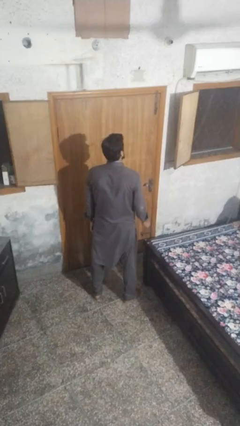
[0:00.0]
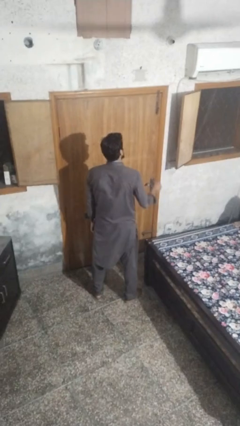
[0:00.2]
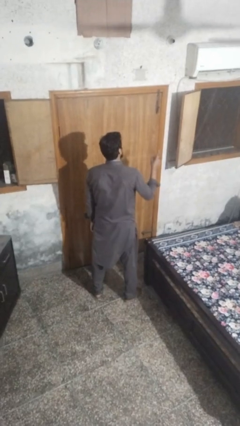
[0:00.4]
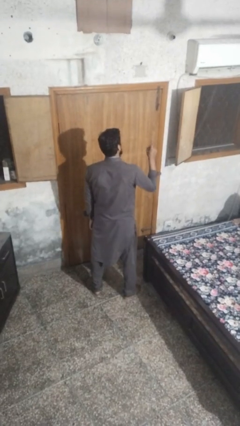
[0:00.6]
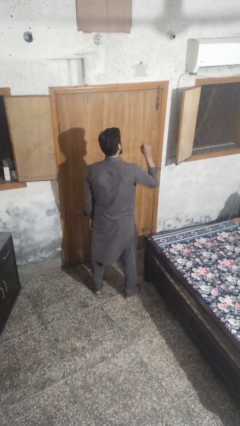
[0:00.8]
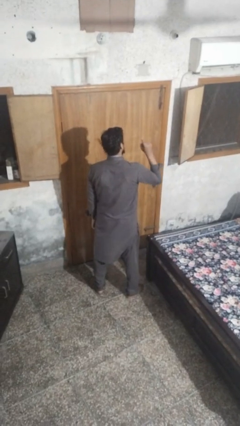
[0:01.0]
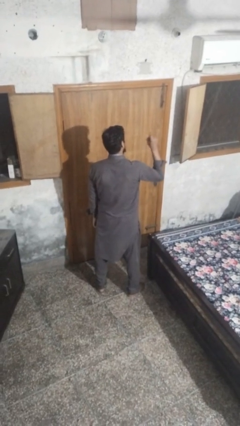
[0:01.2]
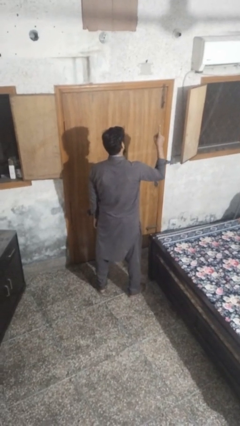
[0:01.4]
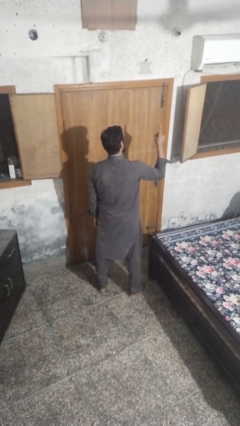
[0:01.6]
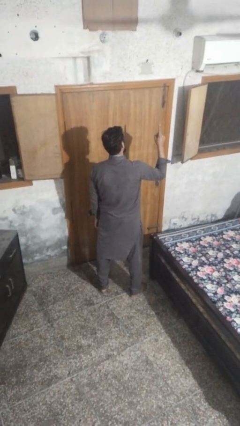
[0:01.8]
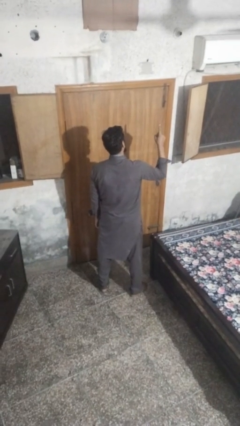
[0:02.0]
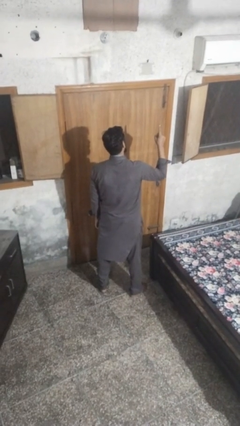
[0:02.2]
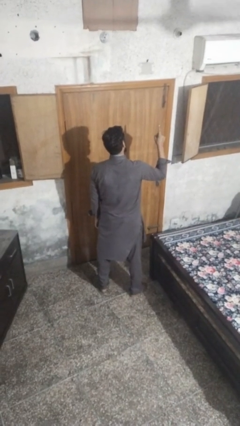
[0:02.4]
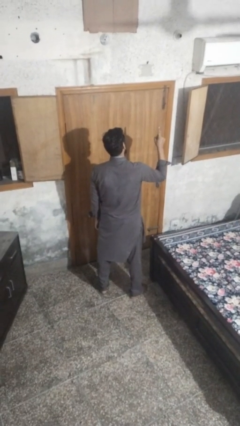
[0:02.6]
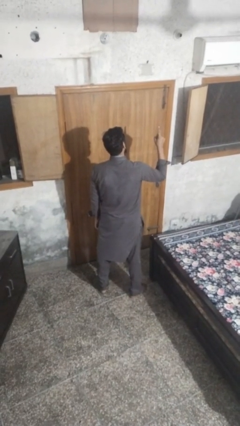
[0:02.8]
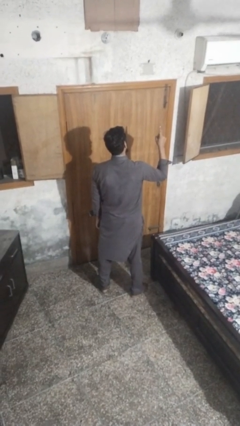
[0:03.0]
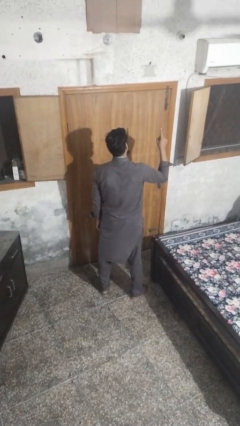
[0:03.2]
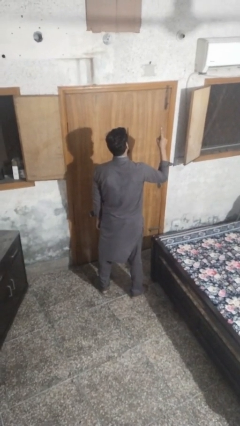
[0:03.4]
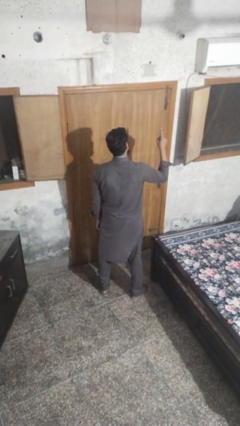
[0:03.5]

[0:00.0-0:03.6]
person gestures number one

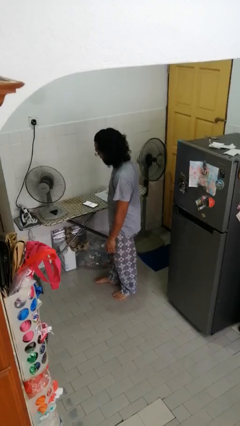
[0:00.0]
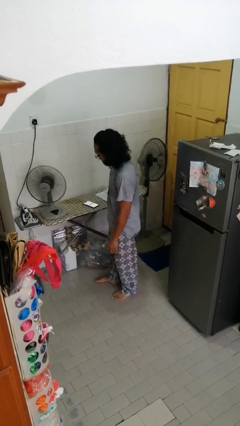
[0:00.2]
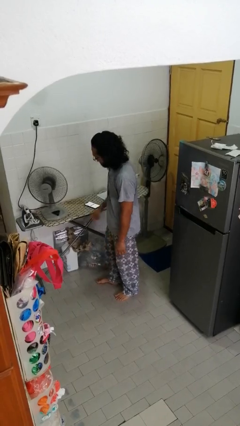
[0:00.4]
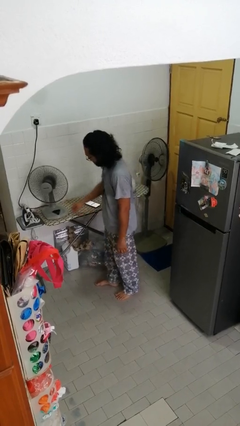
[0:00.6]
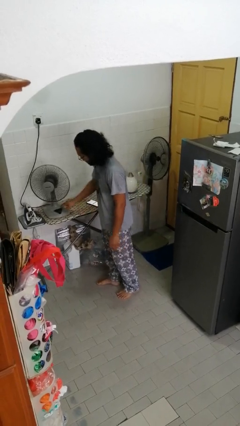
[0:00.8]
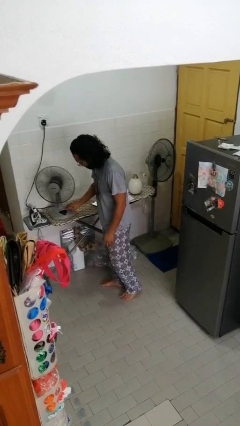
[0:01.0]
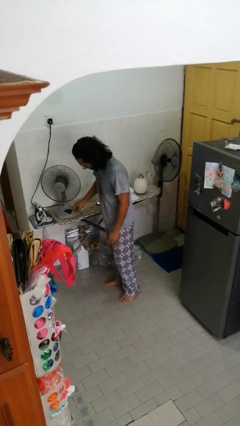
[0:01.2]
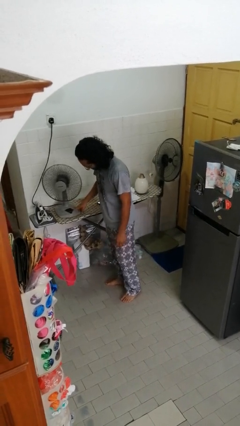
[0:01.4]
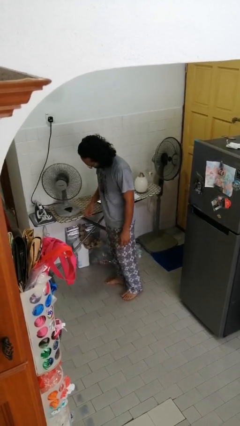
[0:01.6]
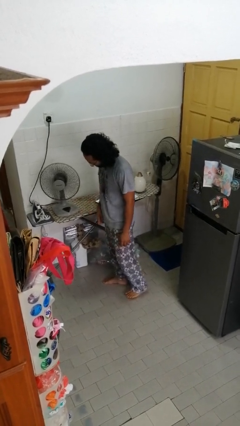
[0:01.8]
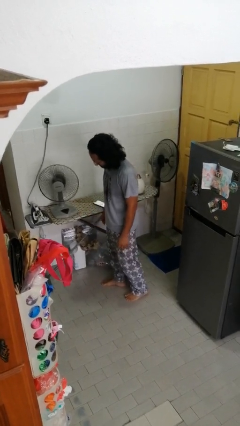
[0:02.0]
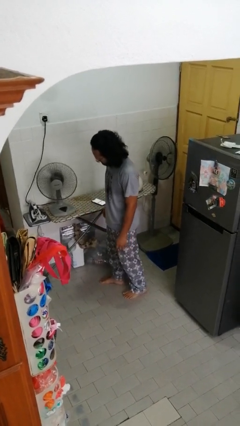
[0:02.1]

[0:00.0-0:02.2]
person turns on fan

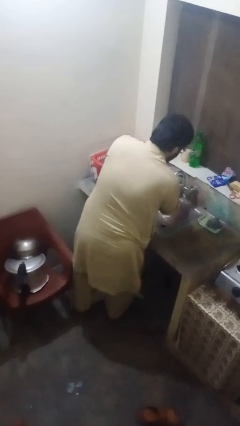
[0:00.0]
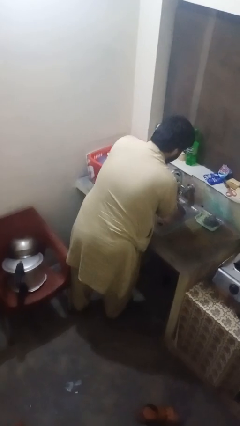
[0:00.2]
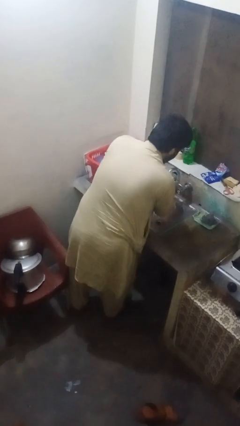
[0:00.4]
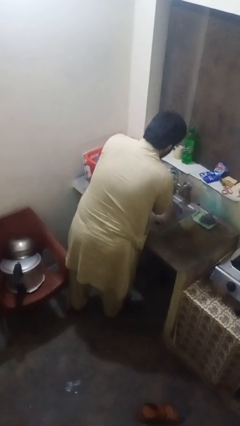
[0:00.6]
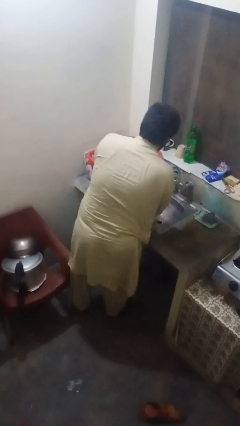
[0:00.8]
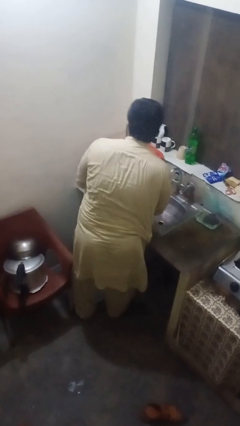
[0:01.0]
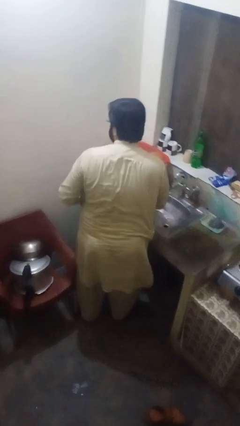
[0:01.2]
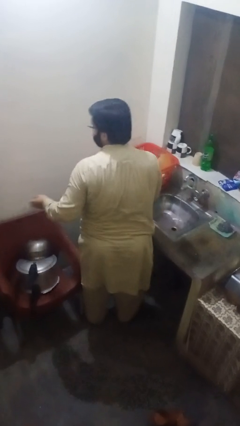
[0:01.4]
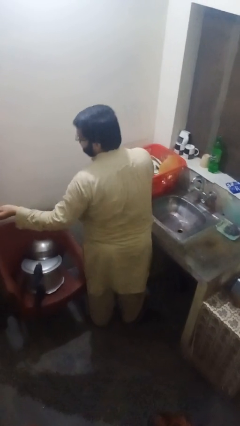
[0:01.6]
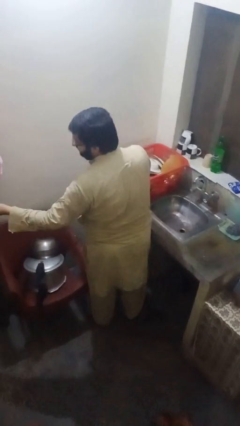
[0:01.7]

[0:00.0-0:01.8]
person washes hands

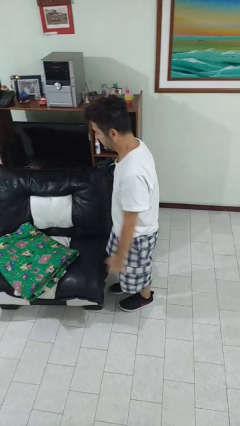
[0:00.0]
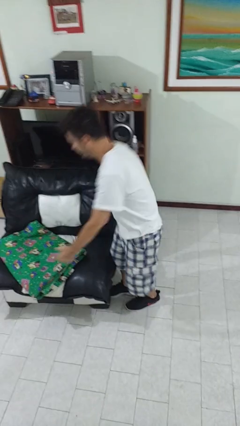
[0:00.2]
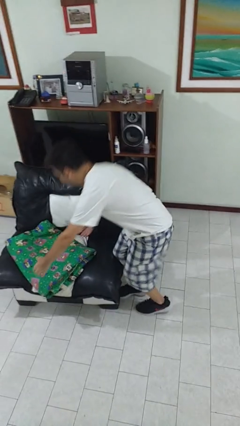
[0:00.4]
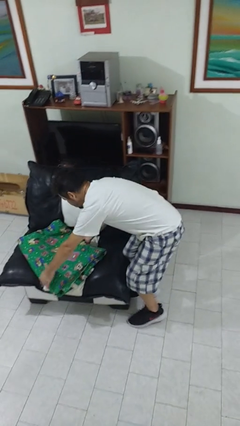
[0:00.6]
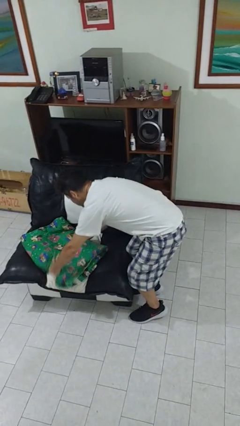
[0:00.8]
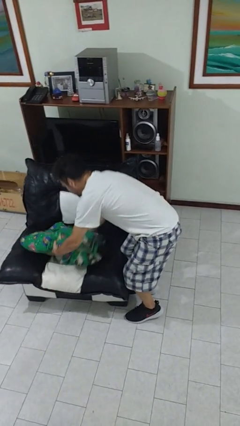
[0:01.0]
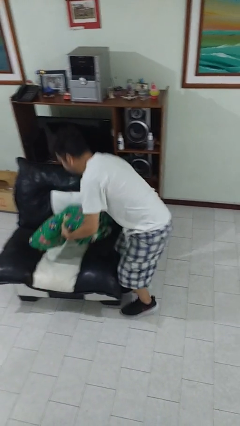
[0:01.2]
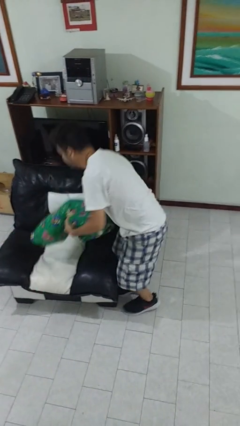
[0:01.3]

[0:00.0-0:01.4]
person picks up object from couch

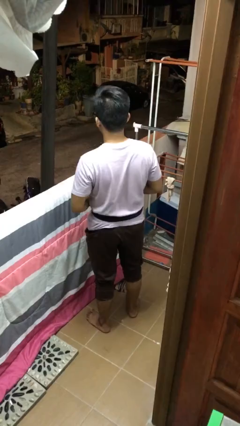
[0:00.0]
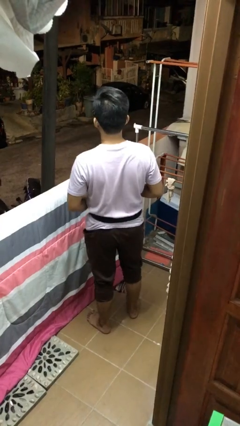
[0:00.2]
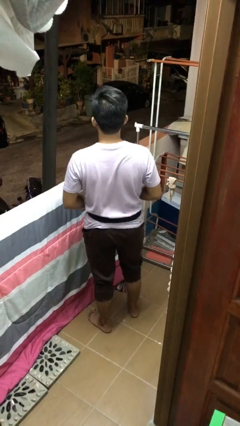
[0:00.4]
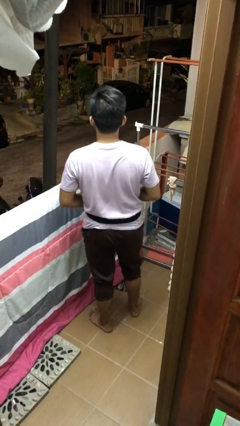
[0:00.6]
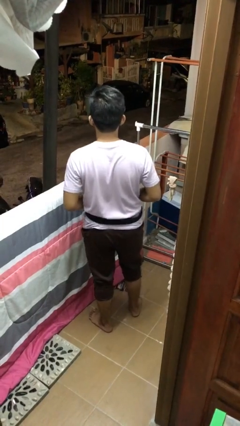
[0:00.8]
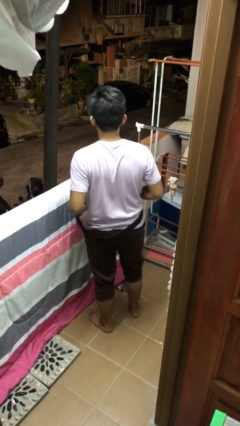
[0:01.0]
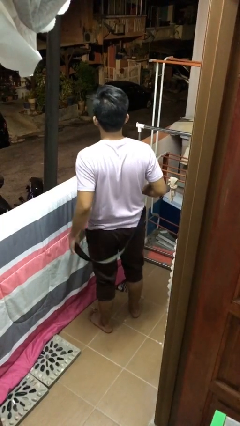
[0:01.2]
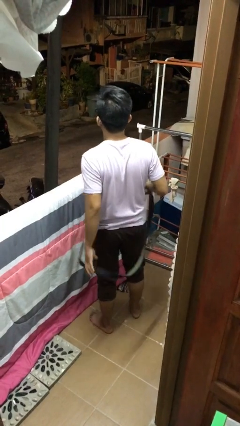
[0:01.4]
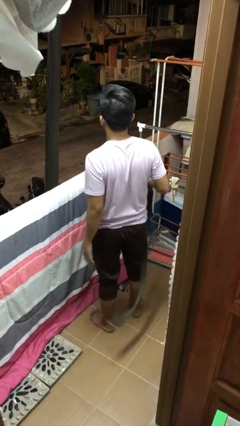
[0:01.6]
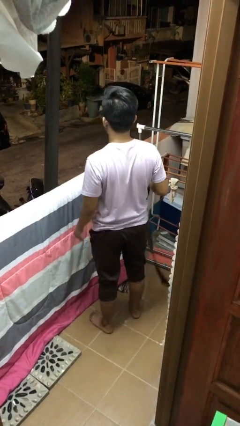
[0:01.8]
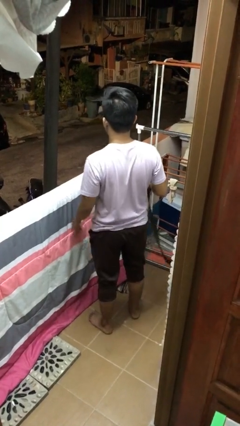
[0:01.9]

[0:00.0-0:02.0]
person takes off belt

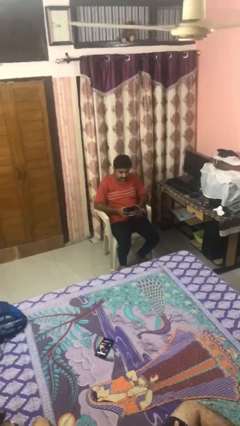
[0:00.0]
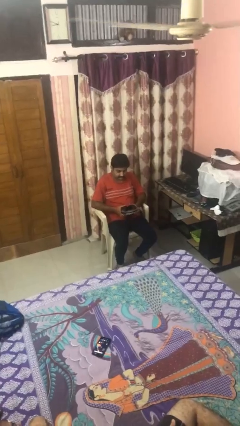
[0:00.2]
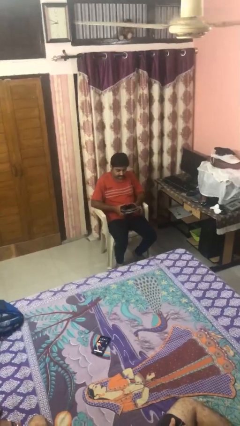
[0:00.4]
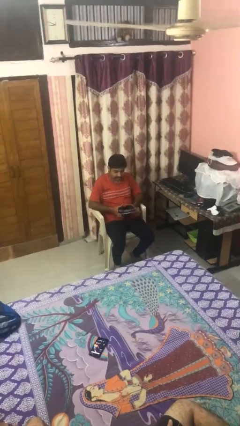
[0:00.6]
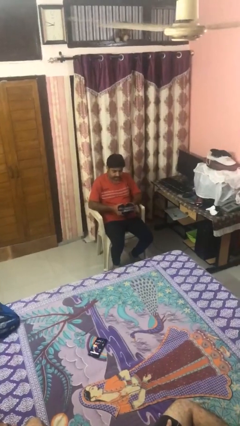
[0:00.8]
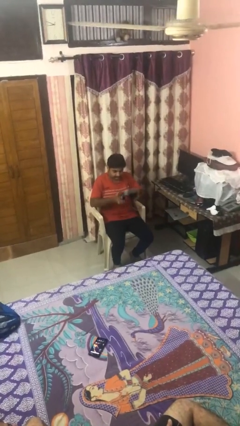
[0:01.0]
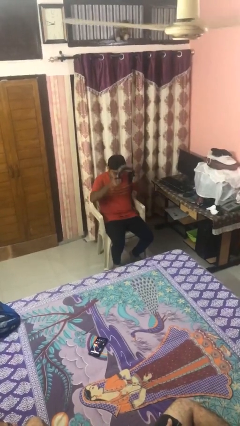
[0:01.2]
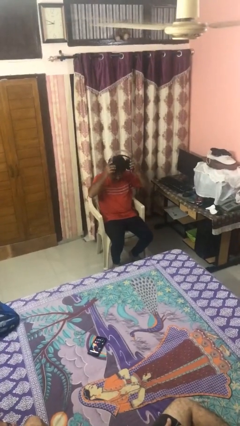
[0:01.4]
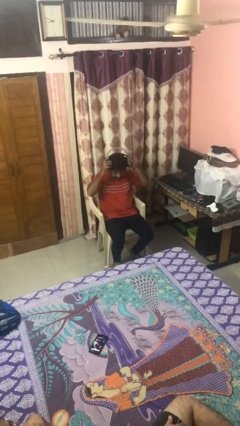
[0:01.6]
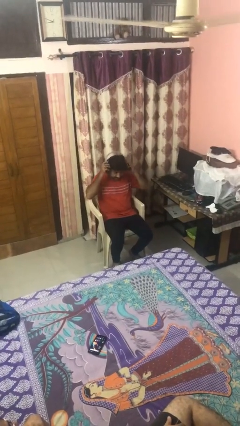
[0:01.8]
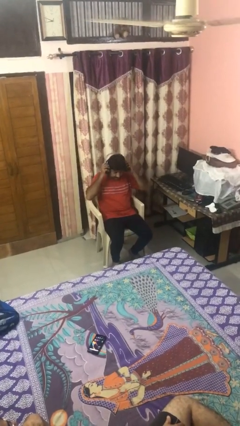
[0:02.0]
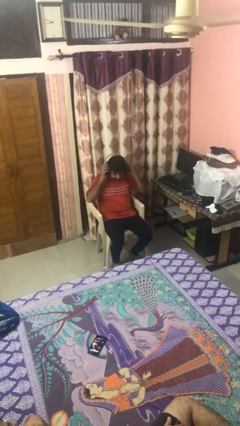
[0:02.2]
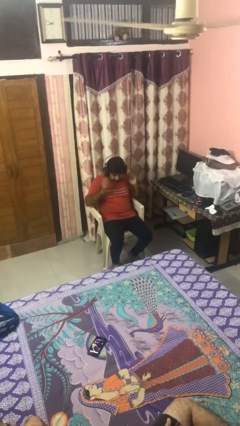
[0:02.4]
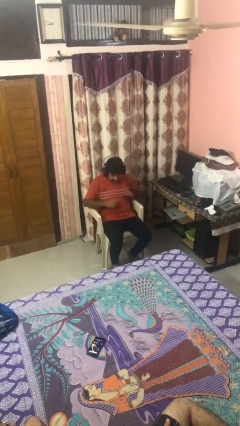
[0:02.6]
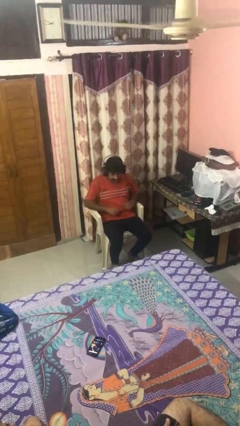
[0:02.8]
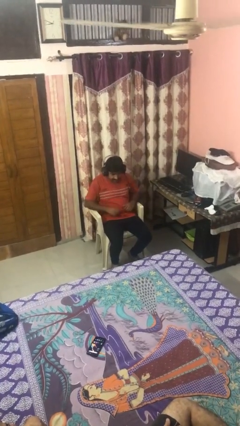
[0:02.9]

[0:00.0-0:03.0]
person puts on headphones

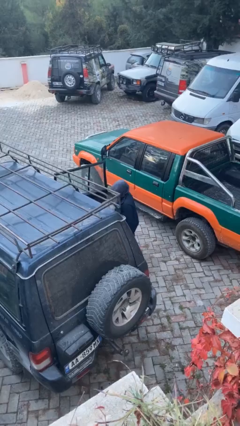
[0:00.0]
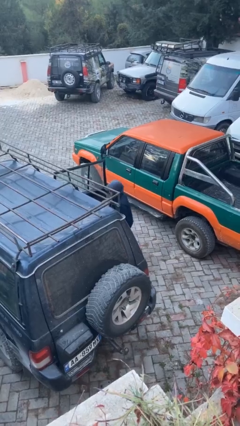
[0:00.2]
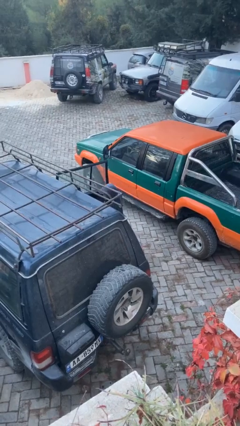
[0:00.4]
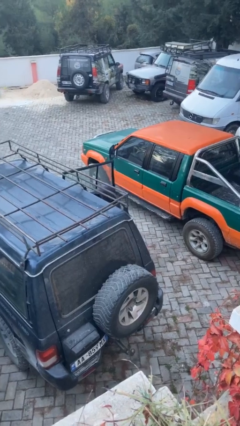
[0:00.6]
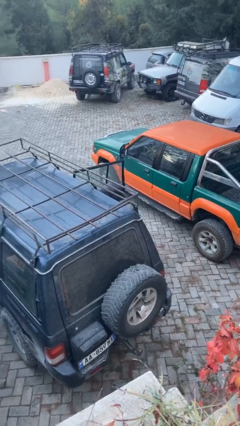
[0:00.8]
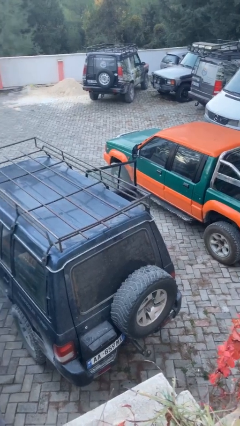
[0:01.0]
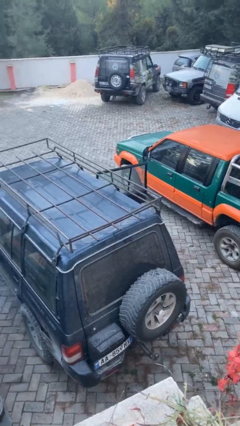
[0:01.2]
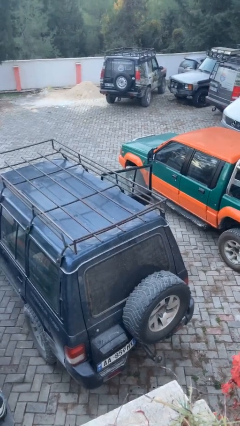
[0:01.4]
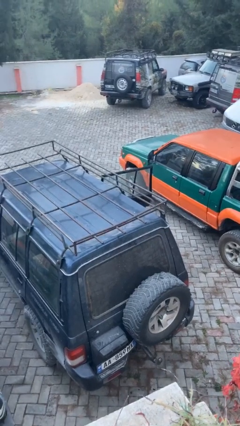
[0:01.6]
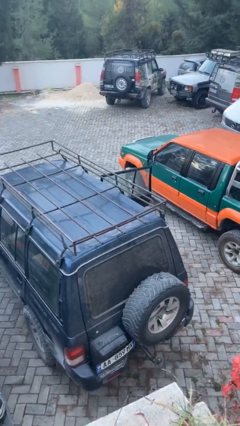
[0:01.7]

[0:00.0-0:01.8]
person enters car

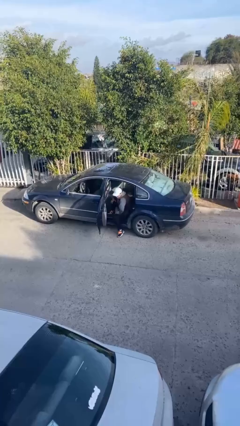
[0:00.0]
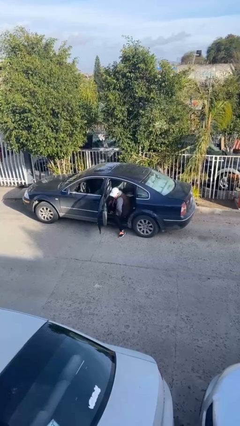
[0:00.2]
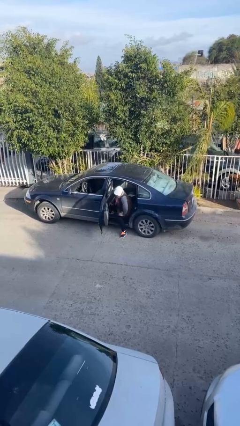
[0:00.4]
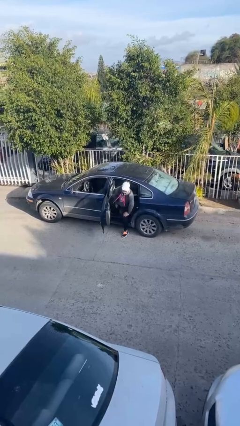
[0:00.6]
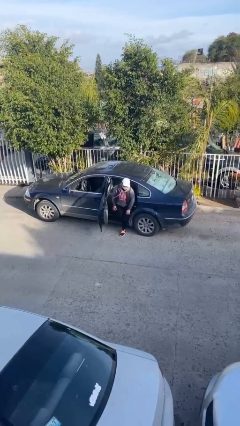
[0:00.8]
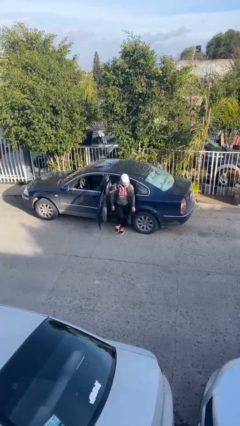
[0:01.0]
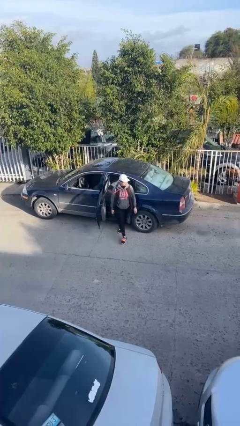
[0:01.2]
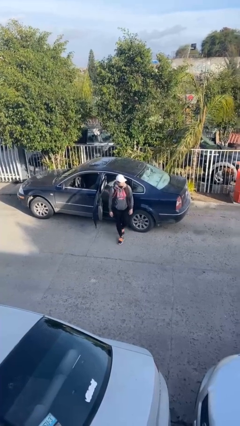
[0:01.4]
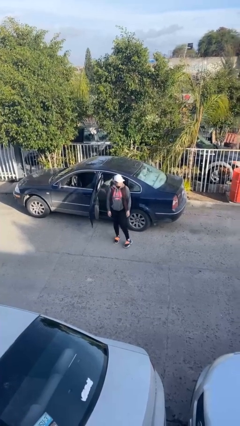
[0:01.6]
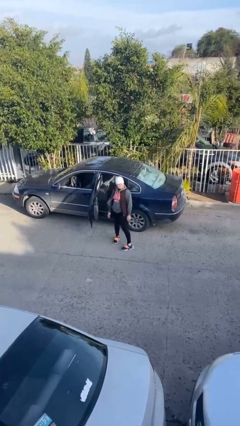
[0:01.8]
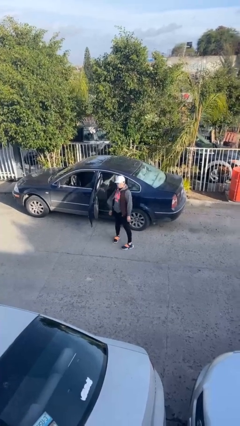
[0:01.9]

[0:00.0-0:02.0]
person exits car
